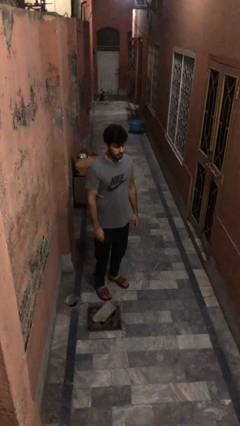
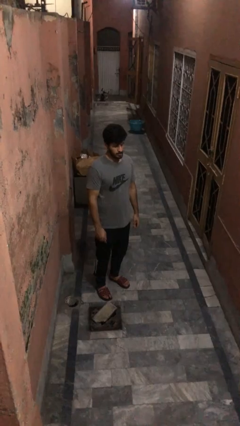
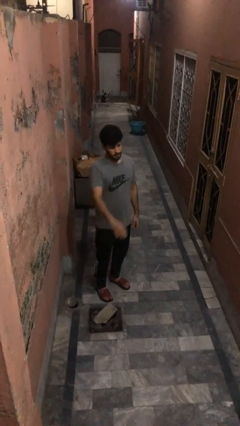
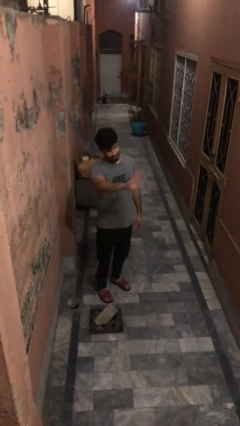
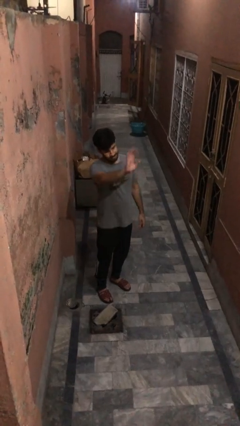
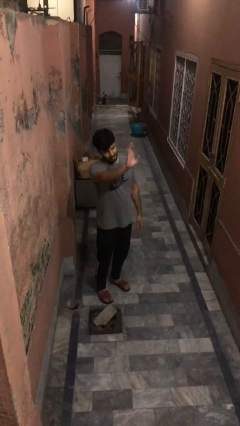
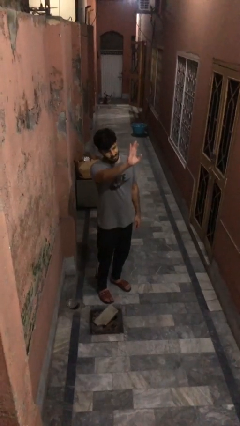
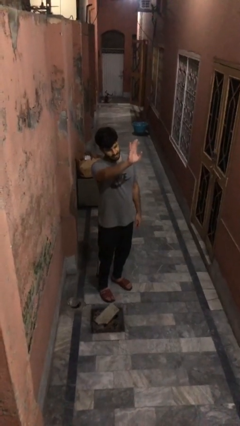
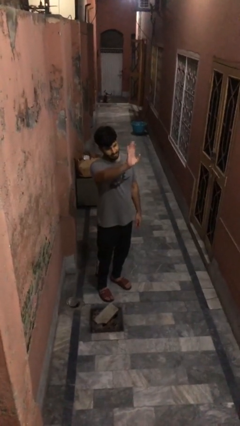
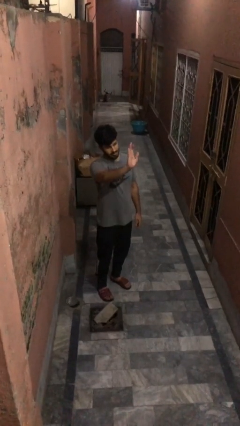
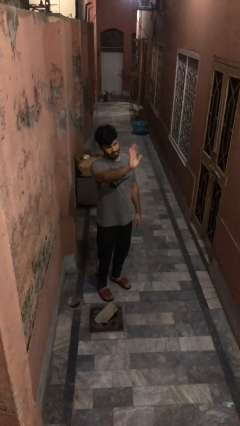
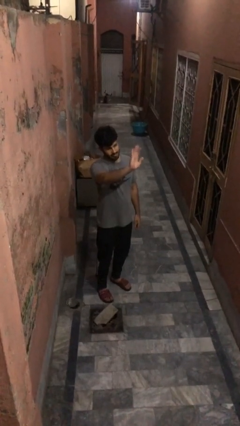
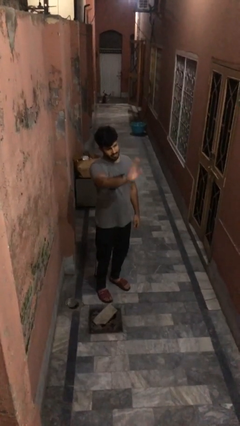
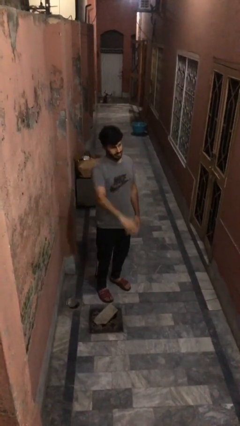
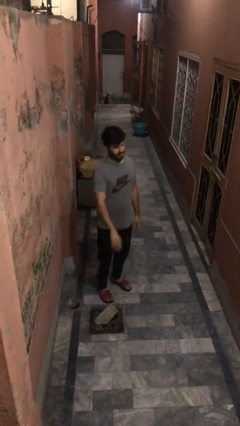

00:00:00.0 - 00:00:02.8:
person waves at person

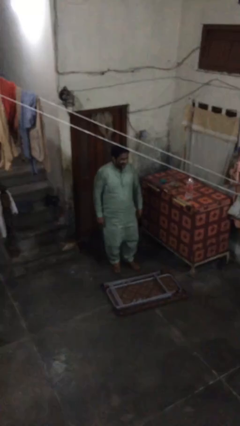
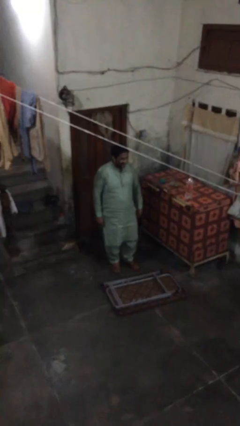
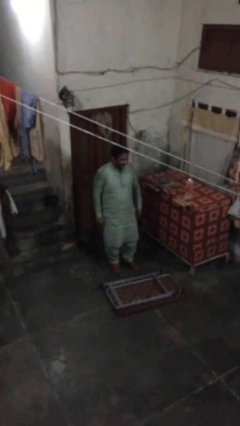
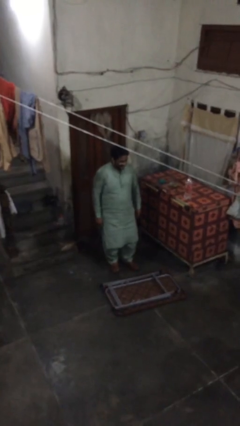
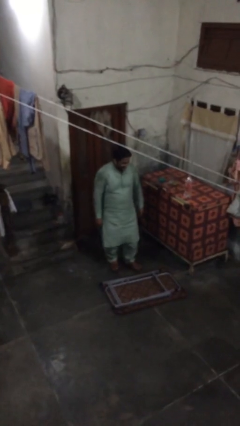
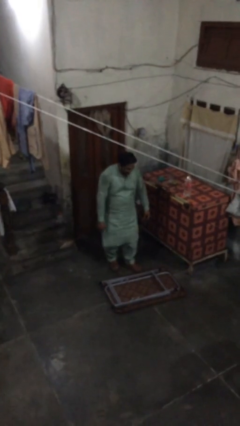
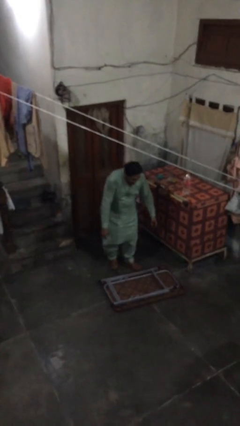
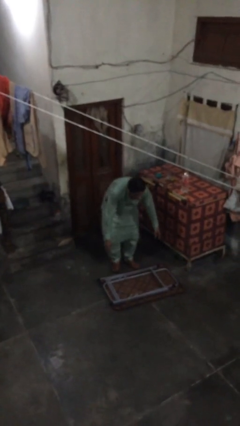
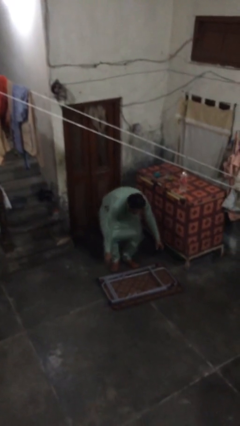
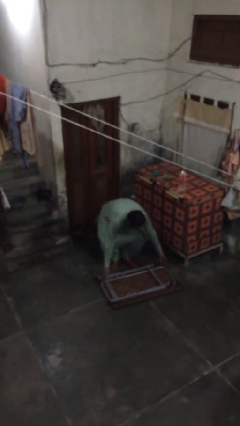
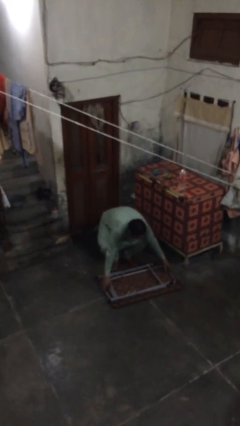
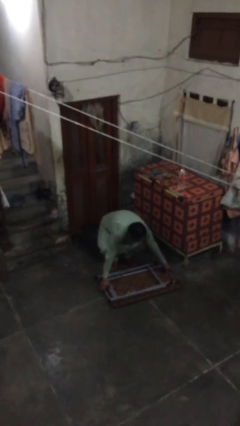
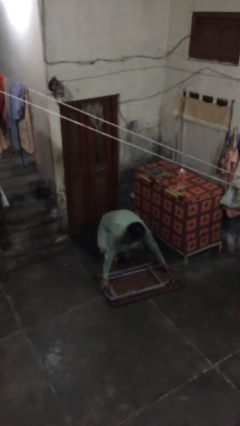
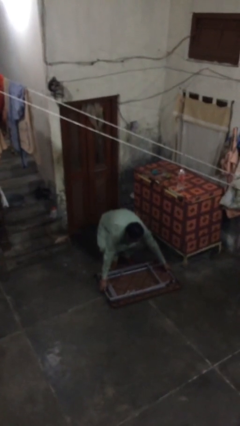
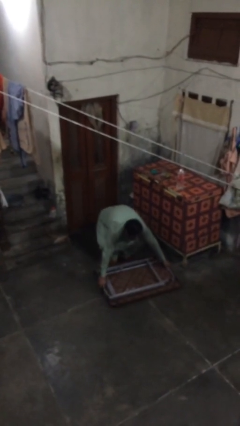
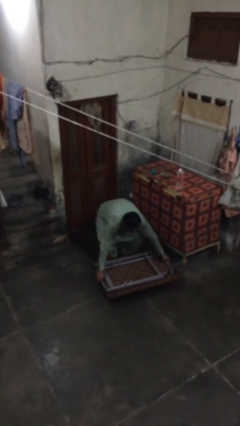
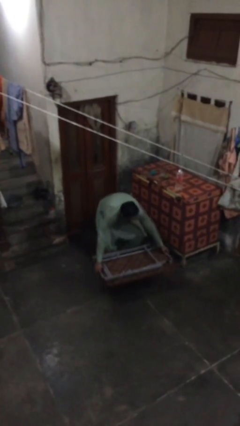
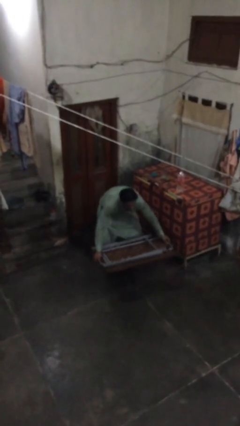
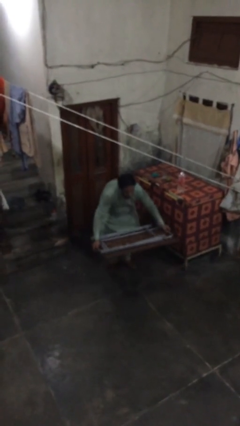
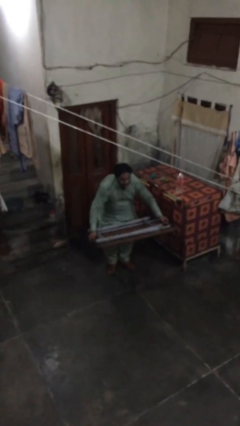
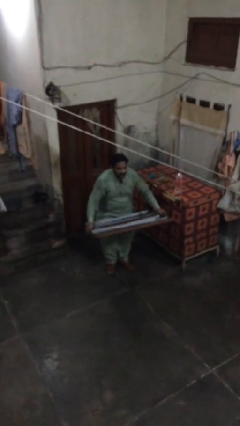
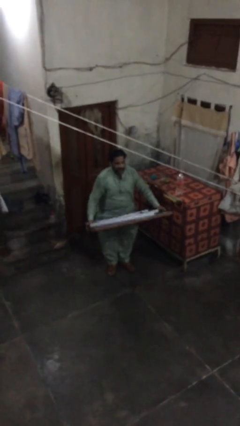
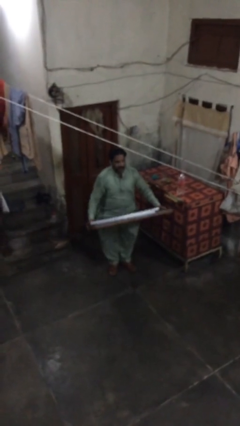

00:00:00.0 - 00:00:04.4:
person picks up object from floor

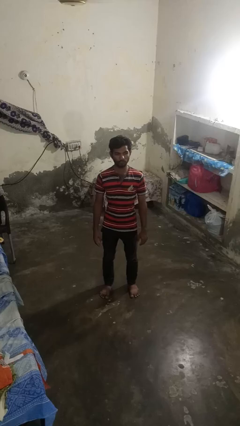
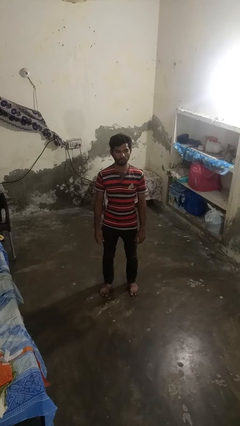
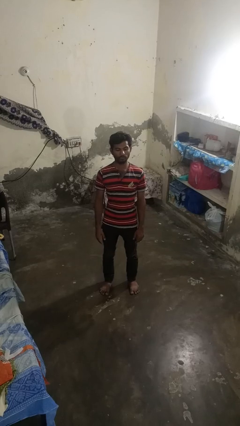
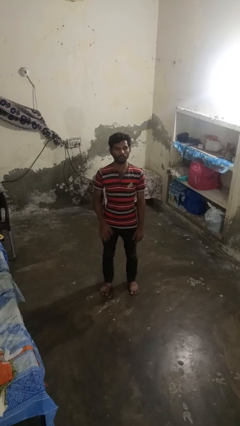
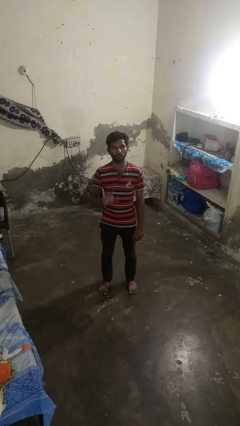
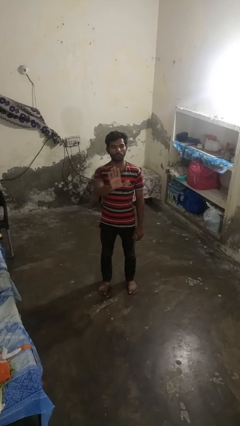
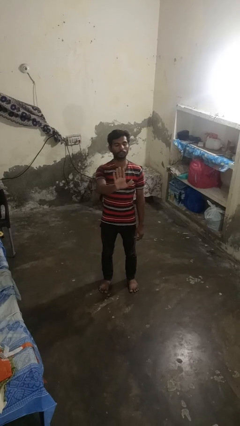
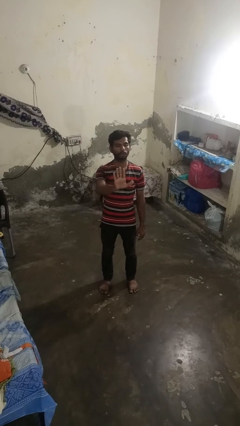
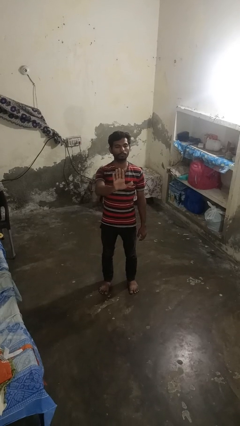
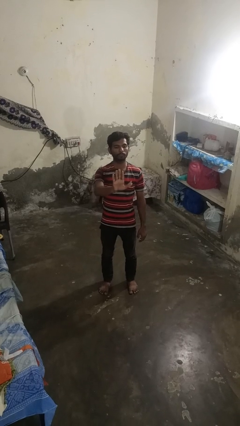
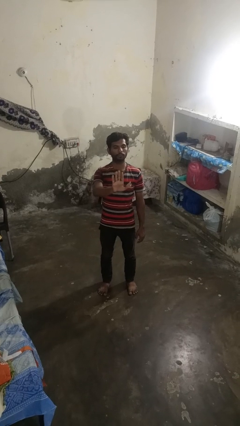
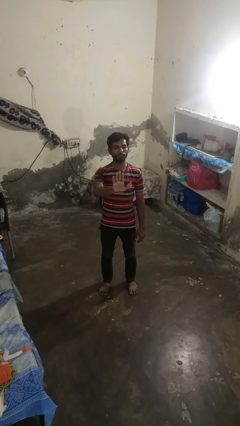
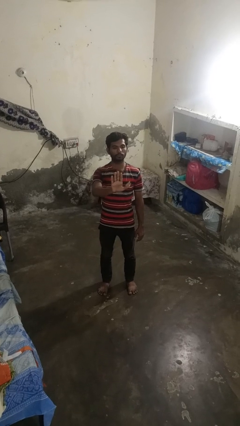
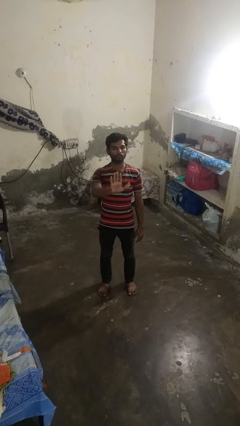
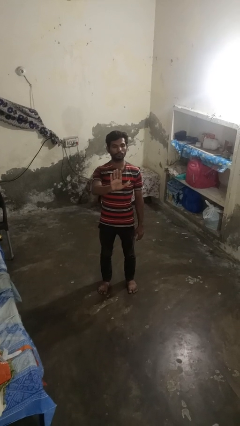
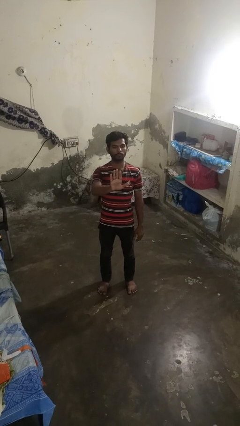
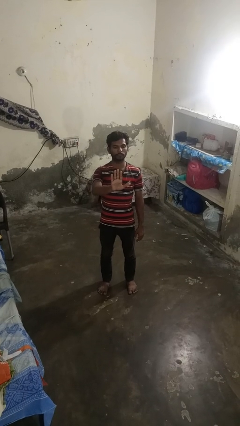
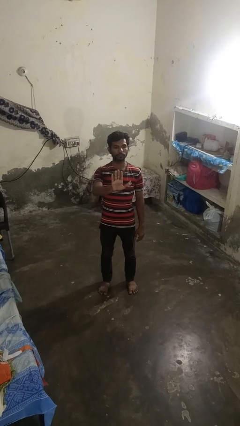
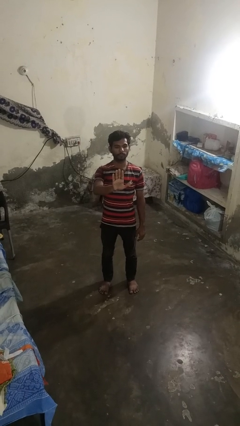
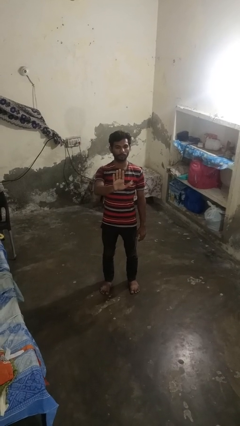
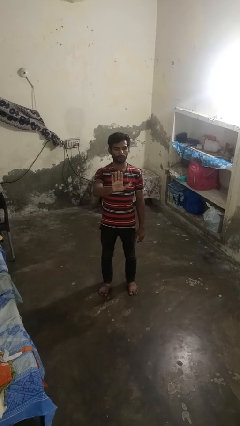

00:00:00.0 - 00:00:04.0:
person gestures stop

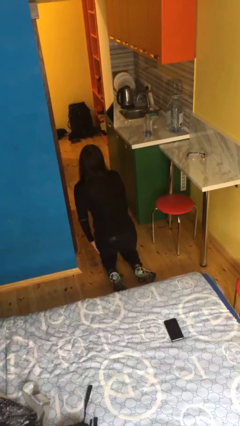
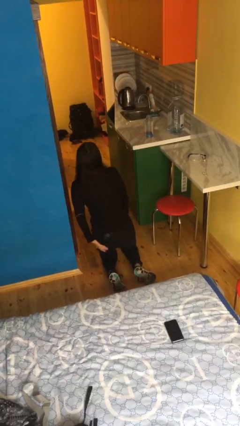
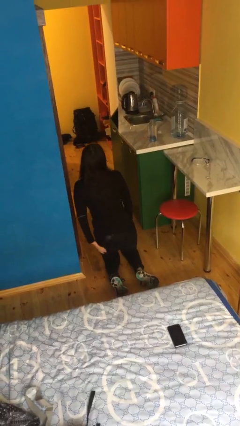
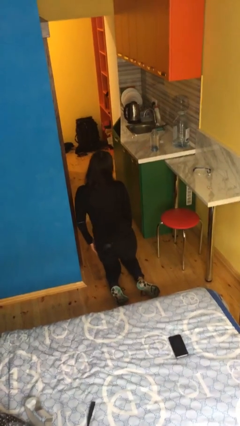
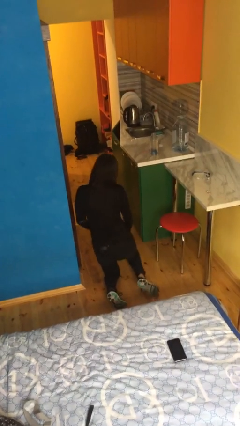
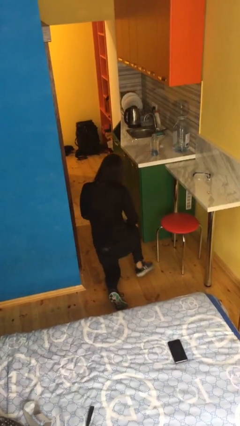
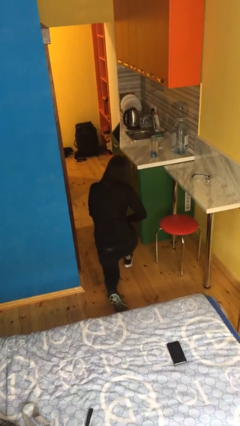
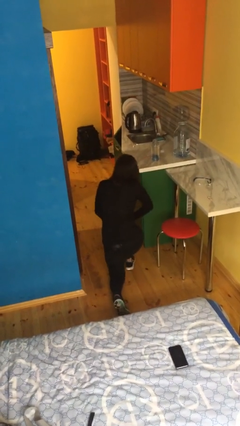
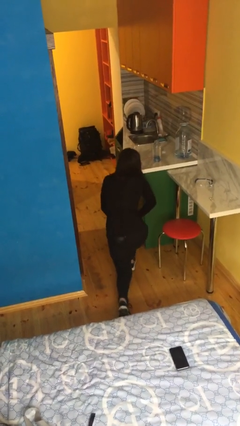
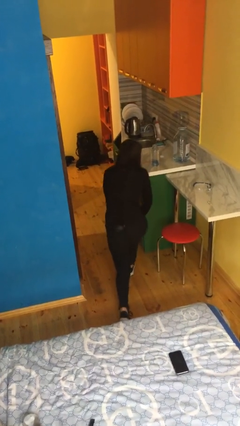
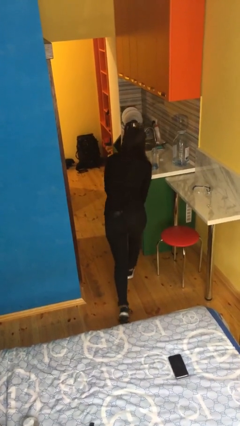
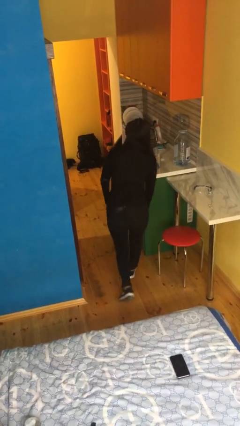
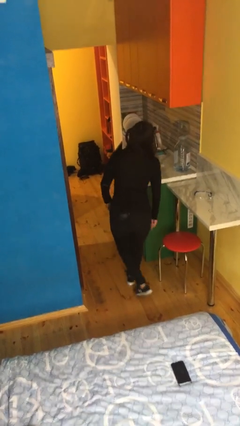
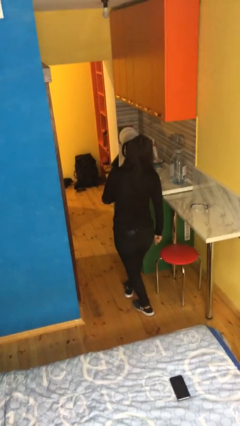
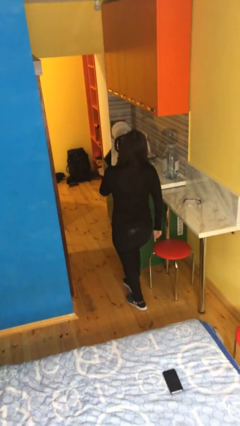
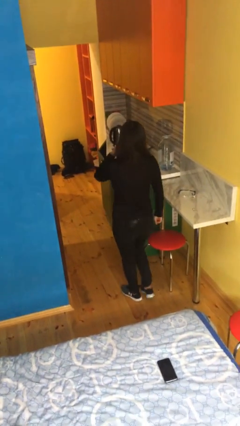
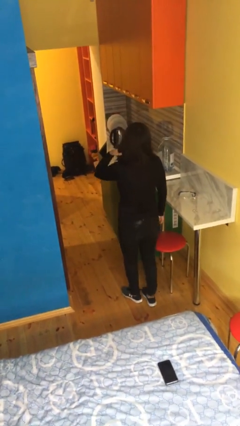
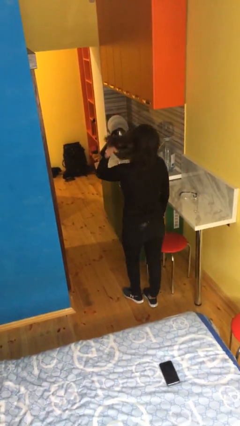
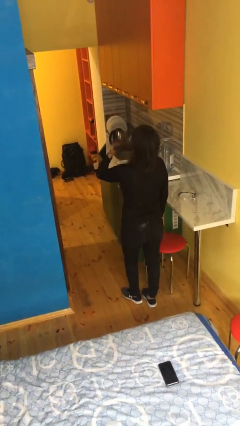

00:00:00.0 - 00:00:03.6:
person stands up from floor

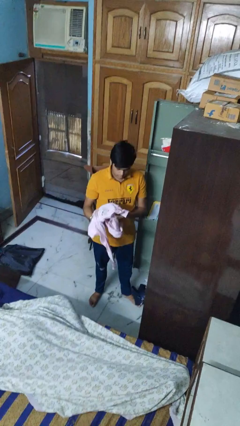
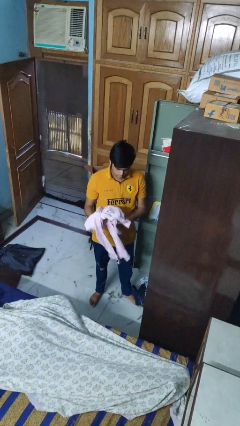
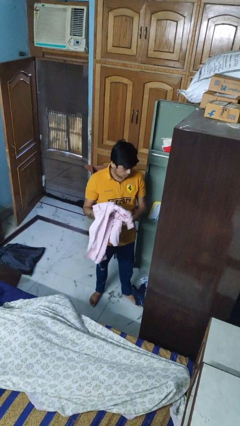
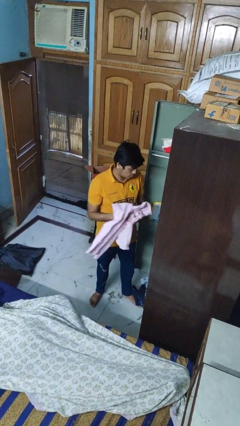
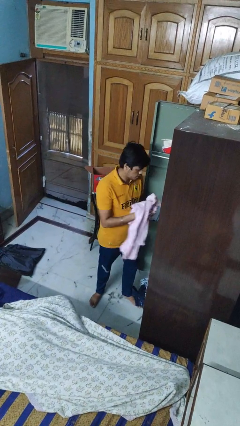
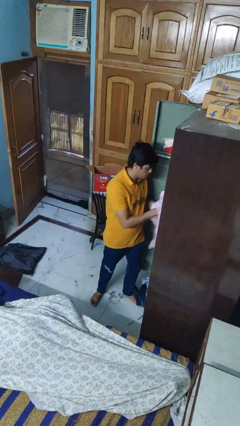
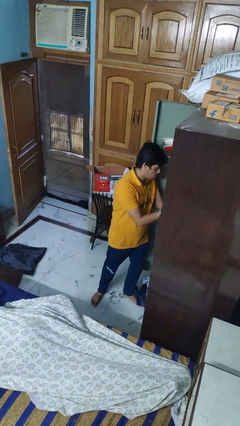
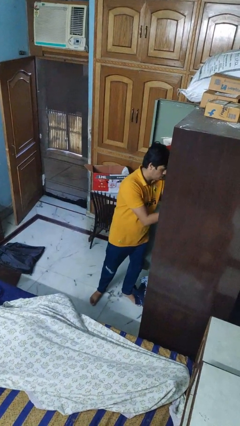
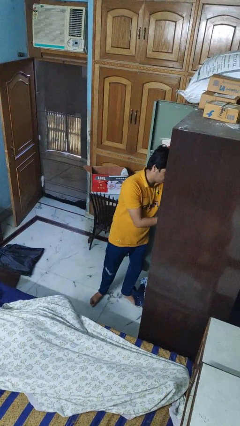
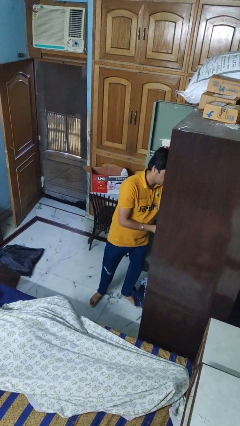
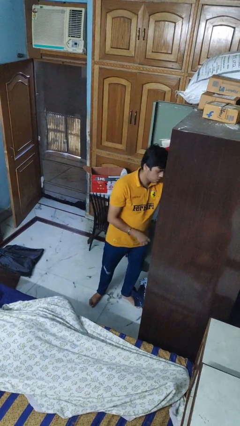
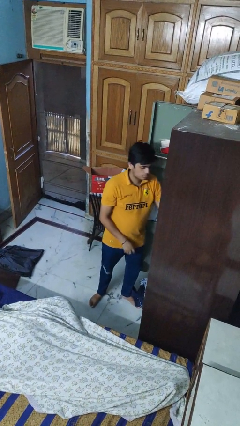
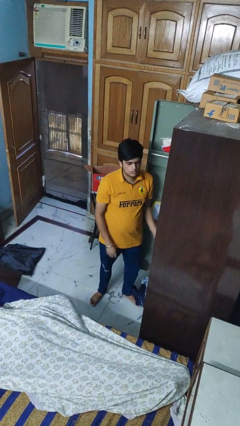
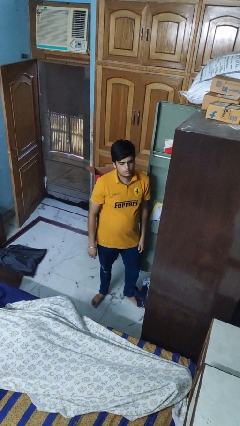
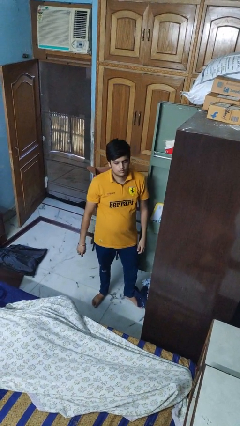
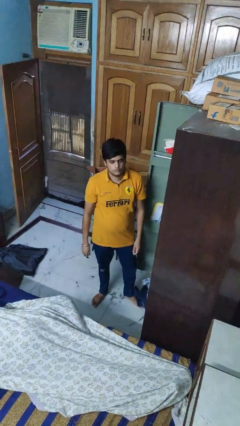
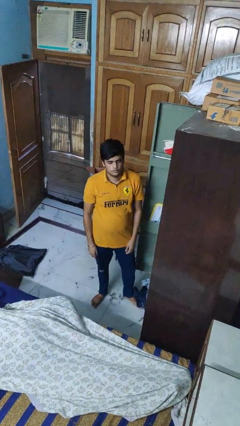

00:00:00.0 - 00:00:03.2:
person puts clothes into dresser
